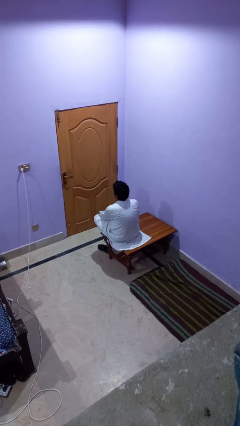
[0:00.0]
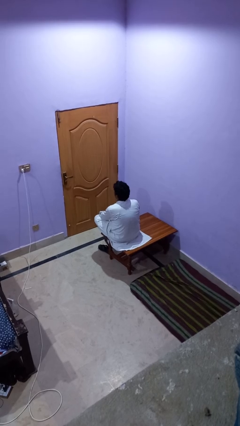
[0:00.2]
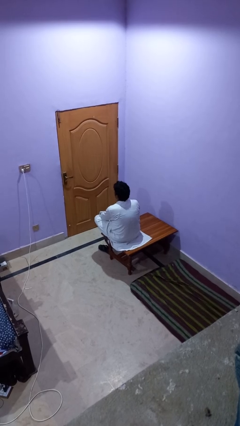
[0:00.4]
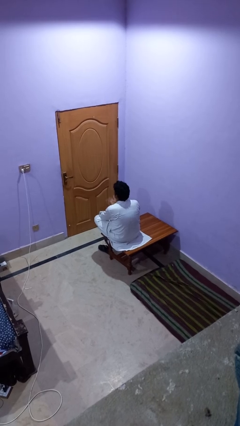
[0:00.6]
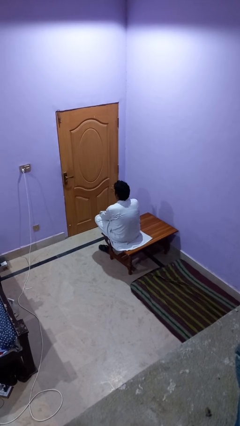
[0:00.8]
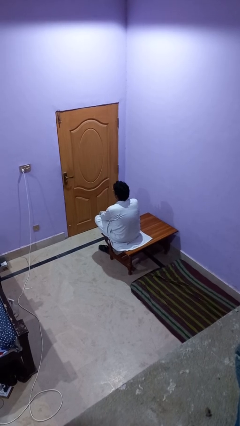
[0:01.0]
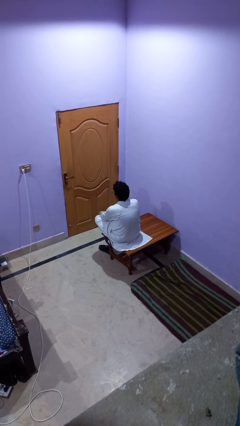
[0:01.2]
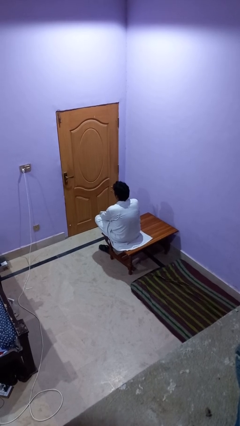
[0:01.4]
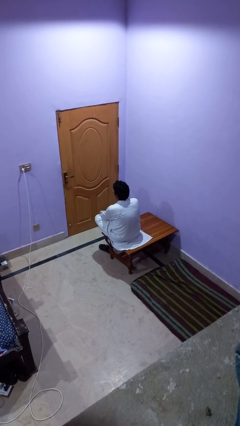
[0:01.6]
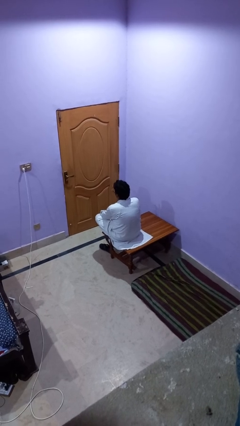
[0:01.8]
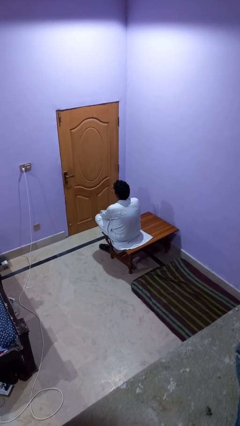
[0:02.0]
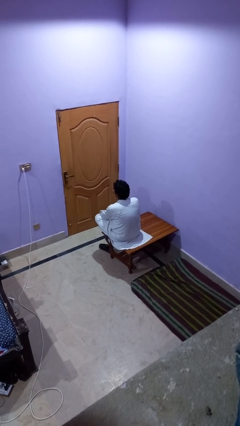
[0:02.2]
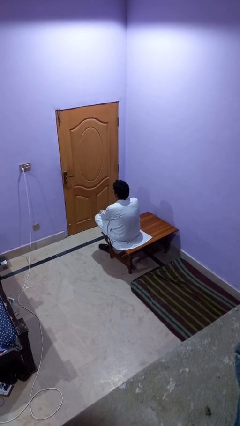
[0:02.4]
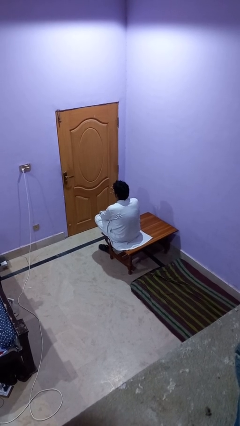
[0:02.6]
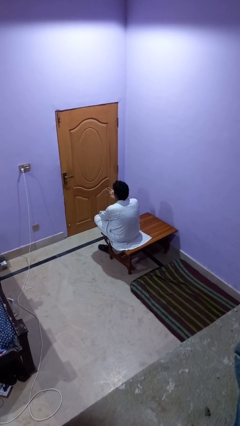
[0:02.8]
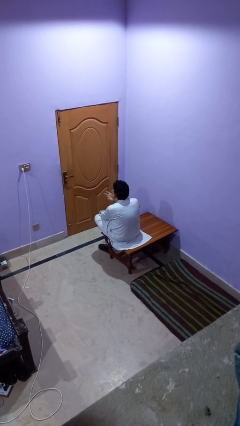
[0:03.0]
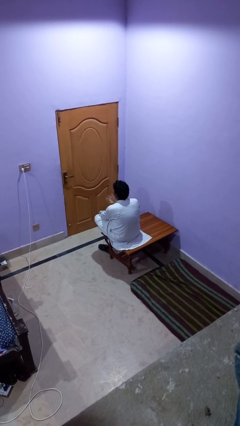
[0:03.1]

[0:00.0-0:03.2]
person licks fingers

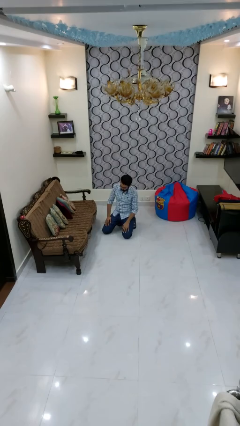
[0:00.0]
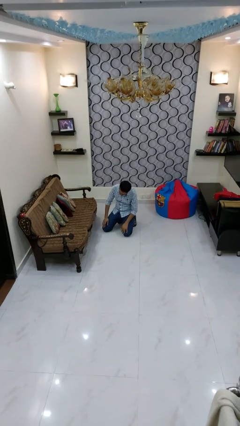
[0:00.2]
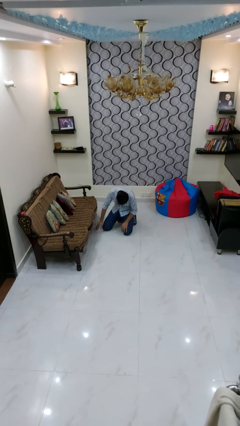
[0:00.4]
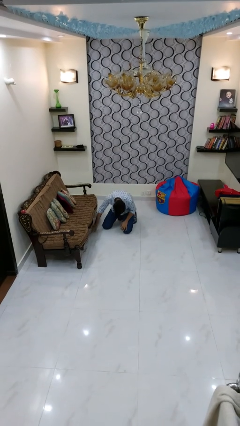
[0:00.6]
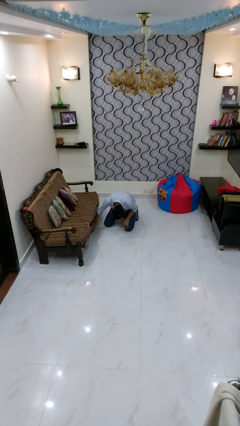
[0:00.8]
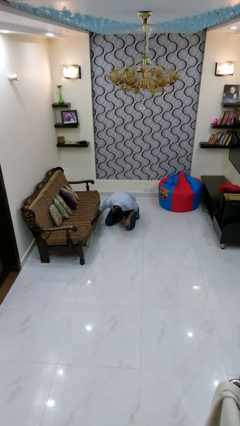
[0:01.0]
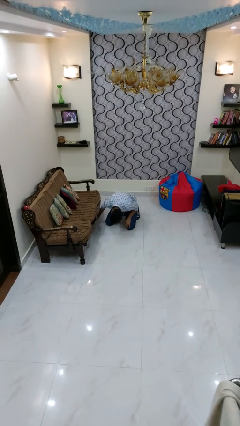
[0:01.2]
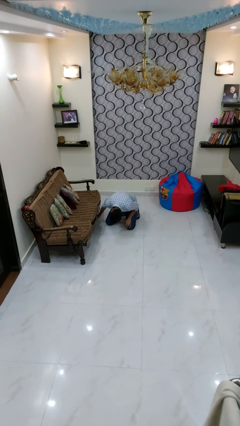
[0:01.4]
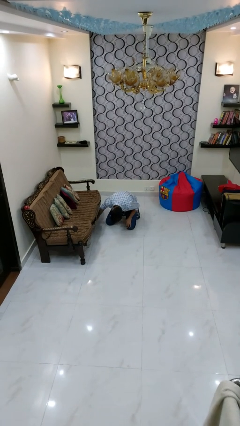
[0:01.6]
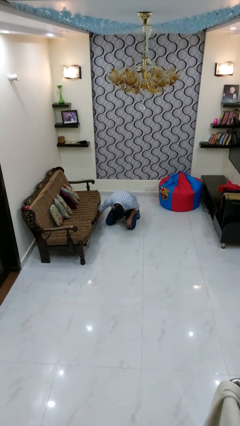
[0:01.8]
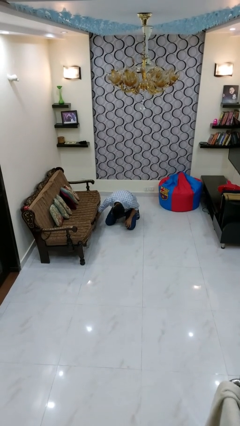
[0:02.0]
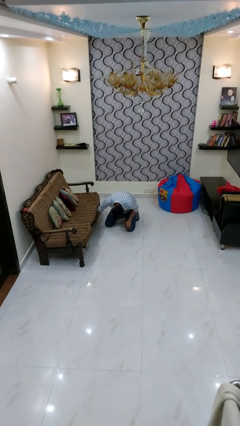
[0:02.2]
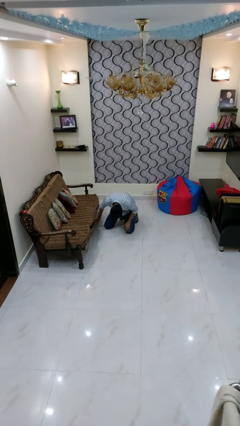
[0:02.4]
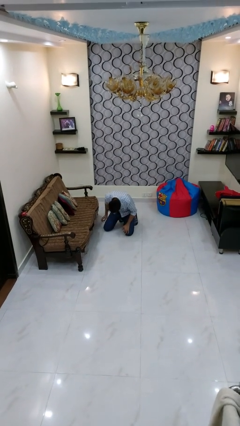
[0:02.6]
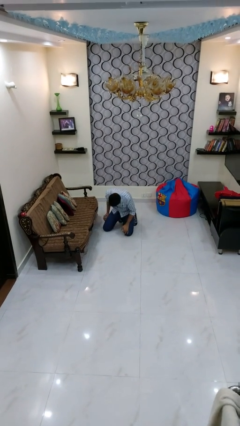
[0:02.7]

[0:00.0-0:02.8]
person searches under couch

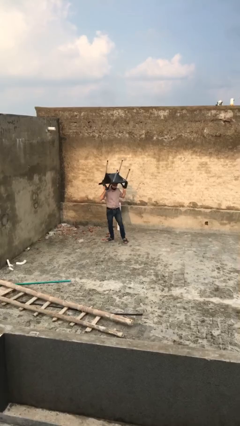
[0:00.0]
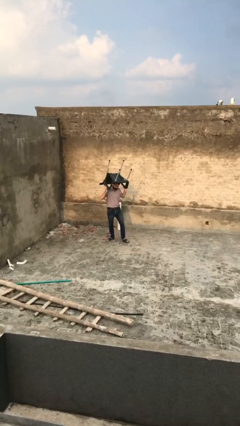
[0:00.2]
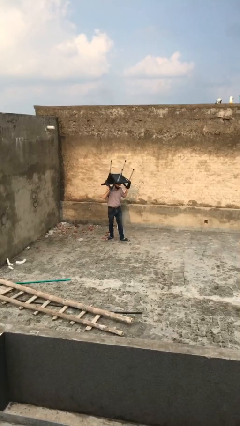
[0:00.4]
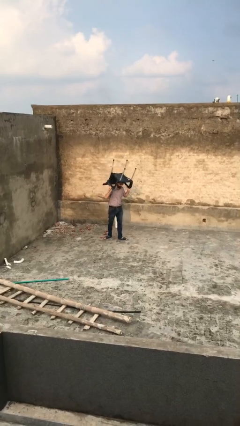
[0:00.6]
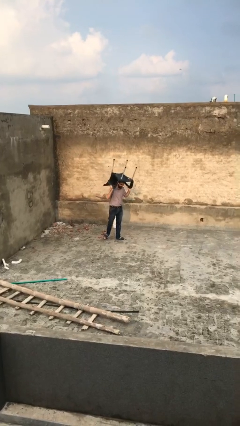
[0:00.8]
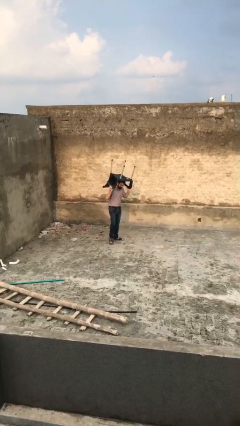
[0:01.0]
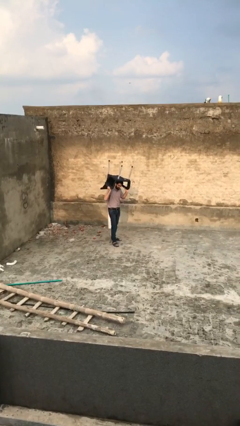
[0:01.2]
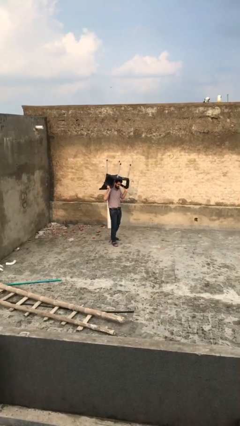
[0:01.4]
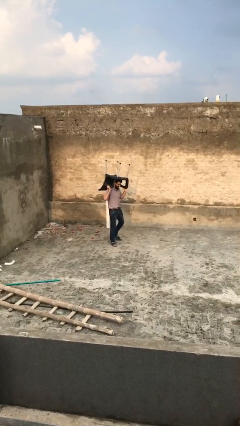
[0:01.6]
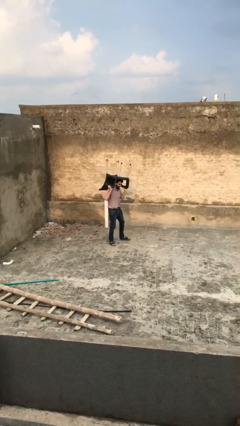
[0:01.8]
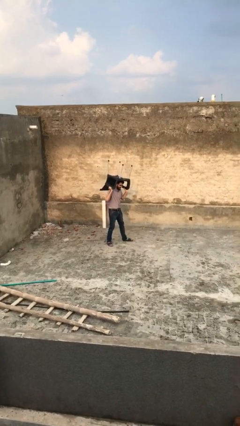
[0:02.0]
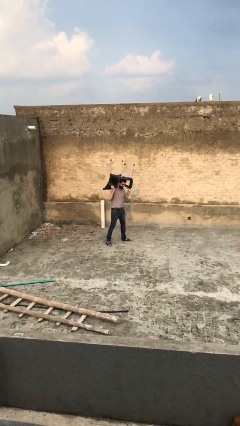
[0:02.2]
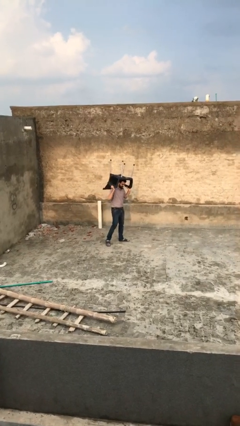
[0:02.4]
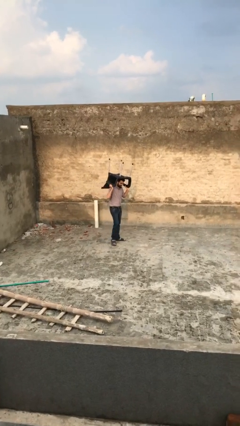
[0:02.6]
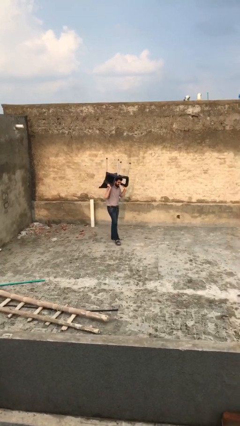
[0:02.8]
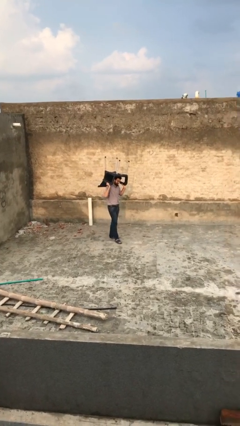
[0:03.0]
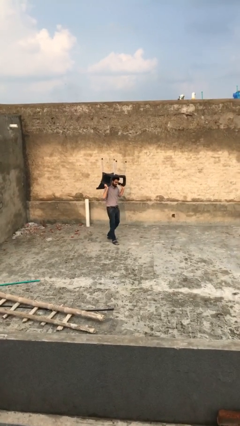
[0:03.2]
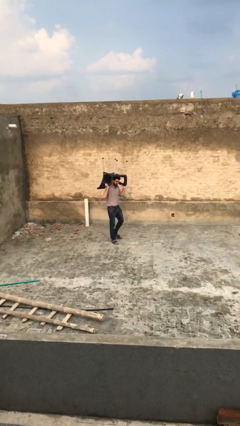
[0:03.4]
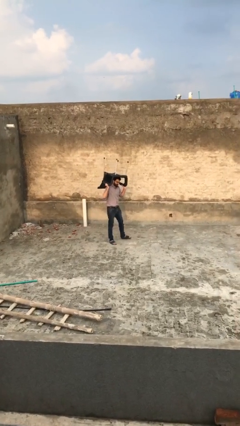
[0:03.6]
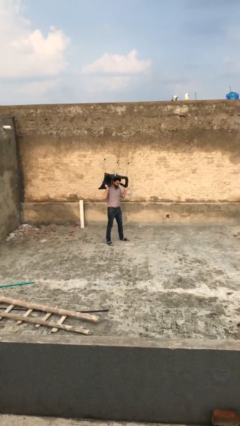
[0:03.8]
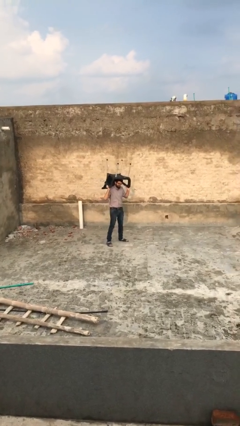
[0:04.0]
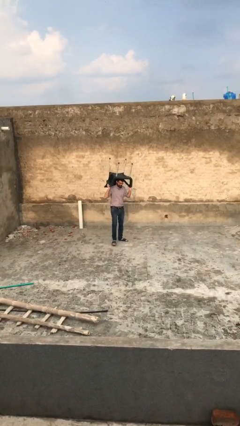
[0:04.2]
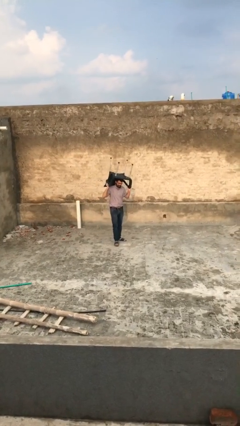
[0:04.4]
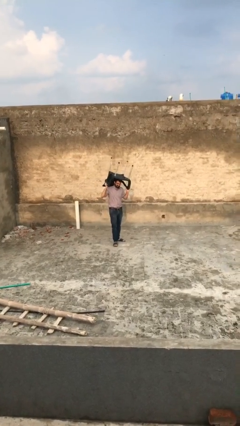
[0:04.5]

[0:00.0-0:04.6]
person carries heavy object

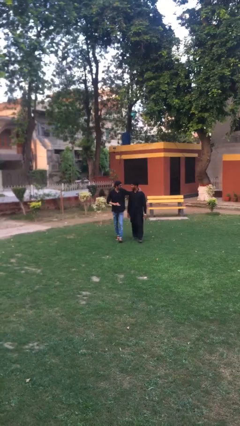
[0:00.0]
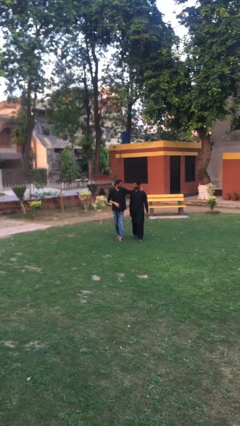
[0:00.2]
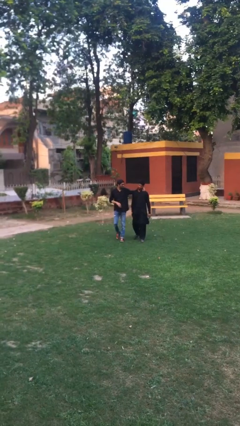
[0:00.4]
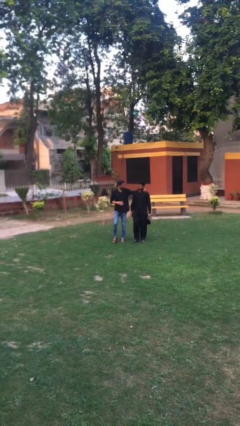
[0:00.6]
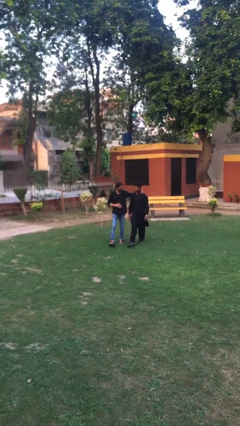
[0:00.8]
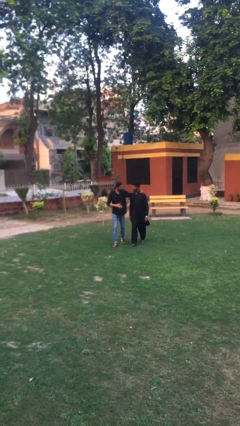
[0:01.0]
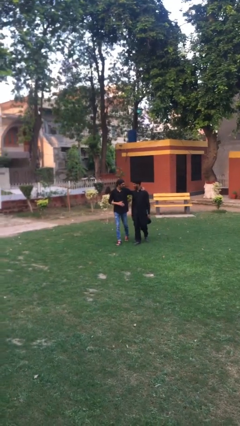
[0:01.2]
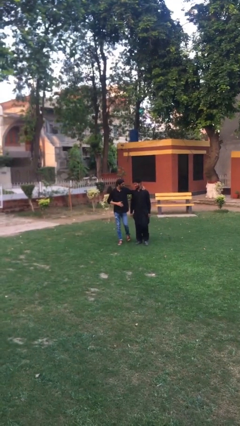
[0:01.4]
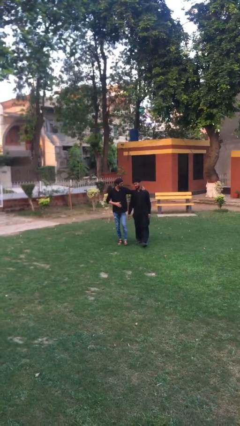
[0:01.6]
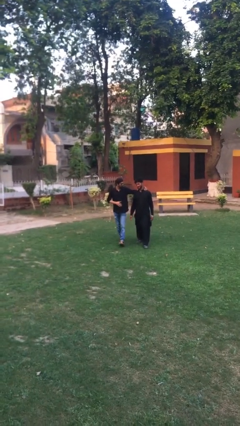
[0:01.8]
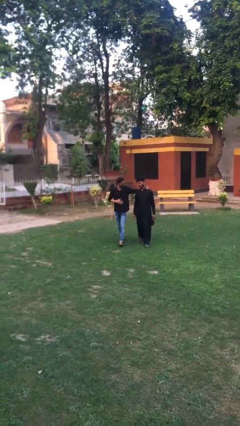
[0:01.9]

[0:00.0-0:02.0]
person talks to person

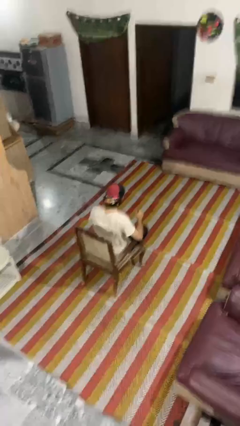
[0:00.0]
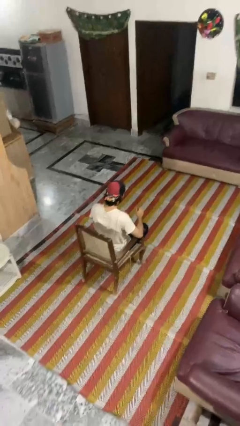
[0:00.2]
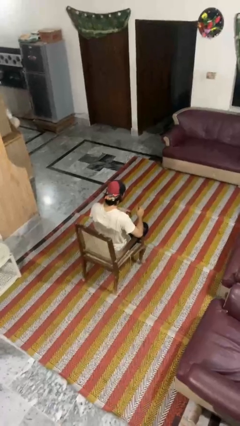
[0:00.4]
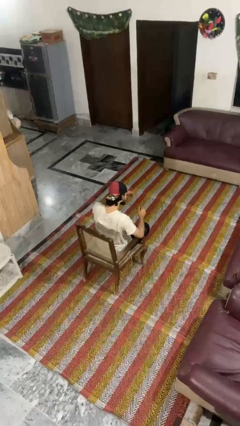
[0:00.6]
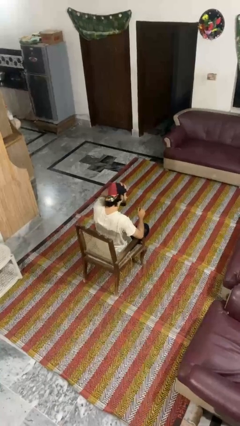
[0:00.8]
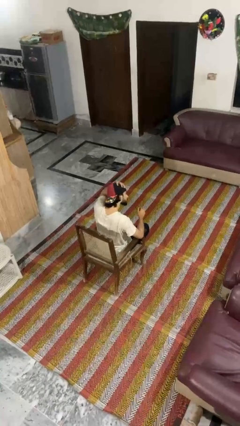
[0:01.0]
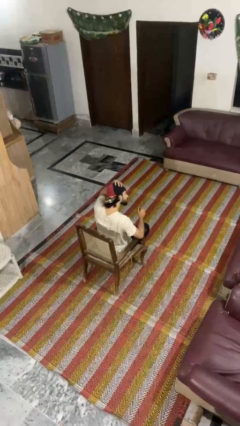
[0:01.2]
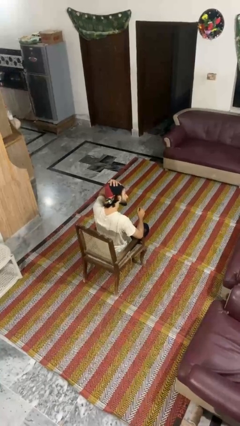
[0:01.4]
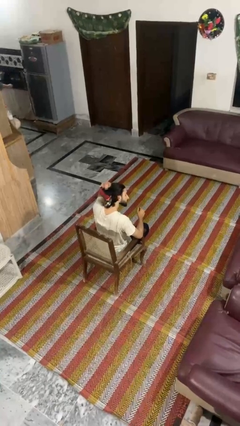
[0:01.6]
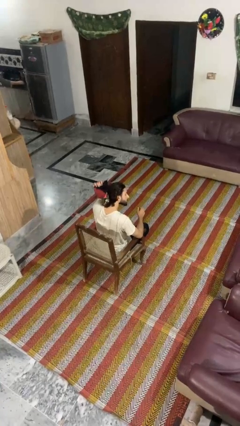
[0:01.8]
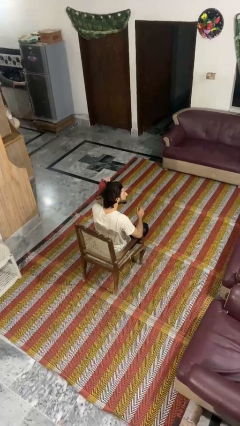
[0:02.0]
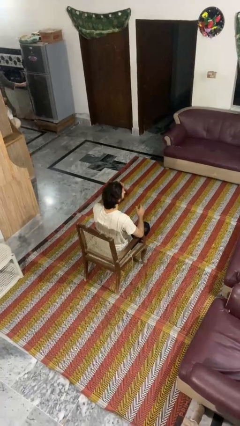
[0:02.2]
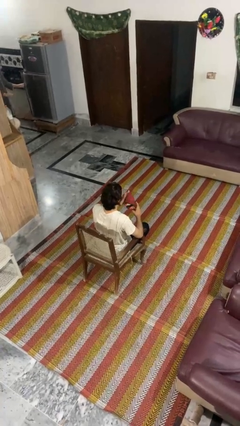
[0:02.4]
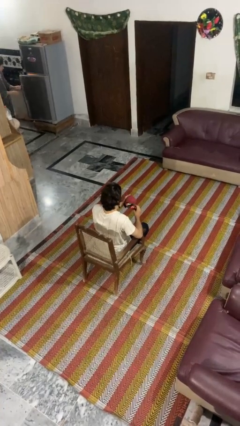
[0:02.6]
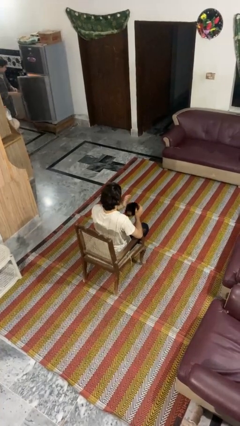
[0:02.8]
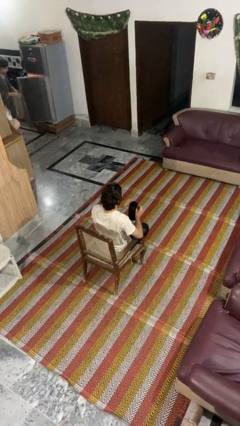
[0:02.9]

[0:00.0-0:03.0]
person takes off hat

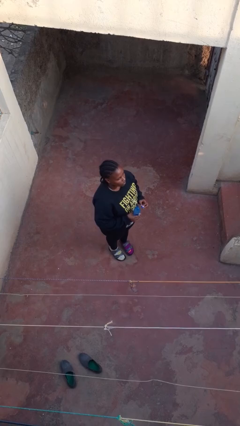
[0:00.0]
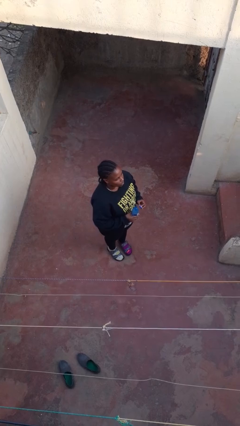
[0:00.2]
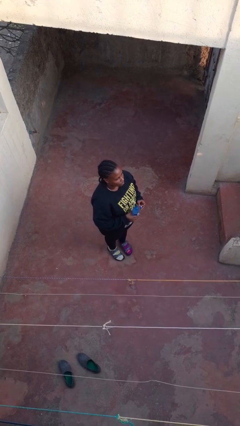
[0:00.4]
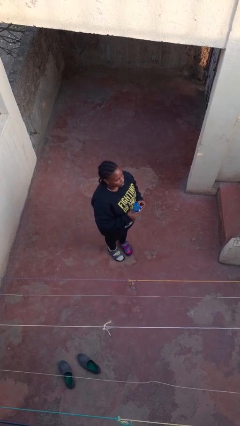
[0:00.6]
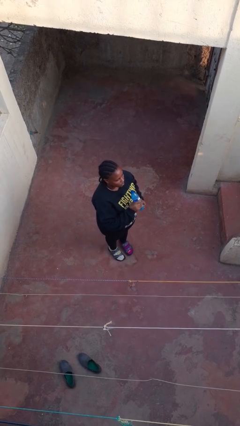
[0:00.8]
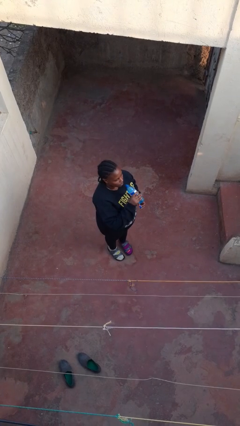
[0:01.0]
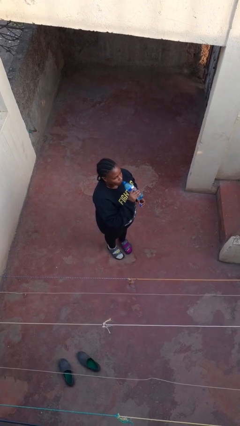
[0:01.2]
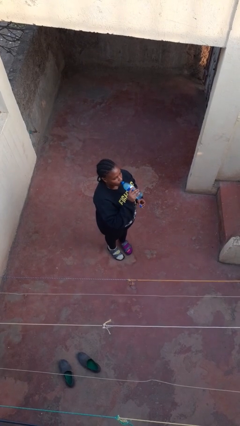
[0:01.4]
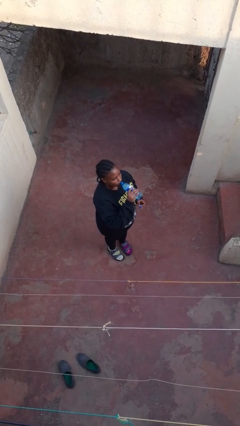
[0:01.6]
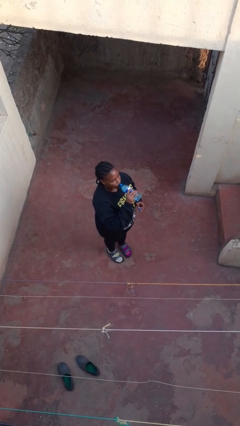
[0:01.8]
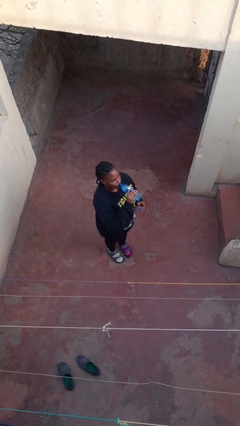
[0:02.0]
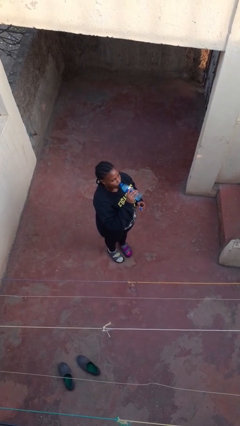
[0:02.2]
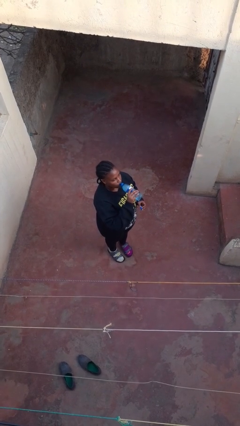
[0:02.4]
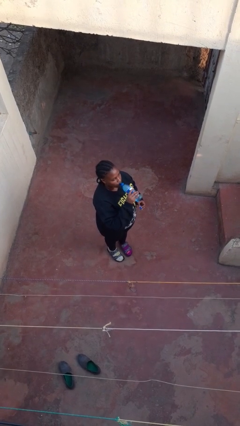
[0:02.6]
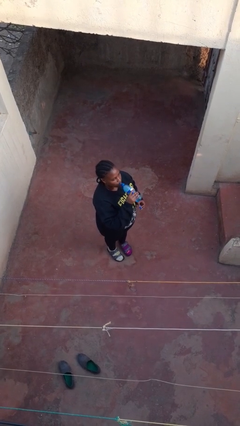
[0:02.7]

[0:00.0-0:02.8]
person drinks from bottle
